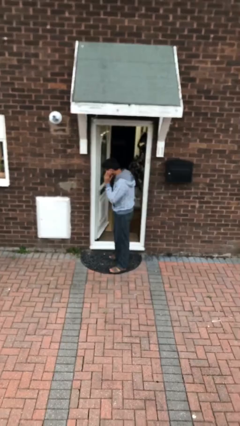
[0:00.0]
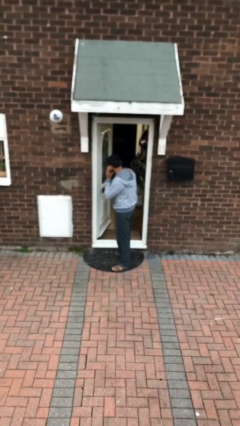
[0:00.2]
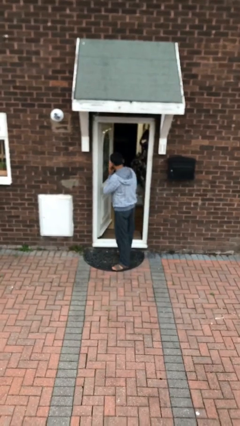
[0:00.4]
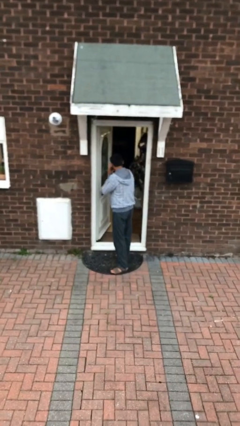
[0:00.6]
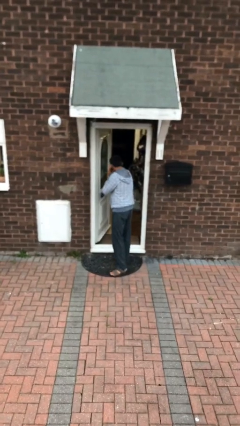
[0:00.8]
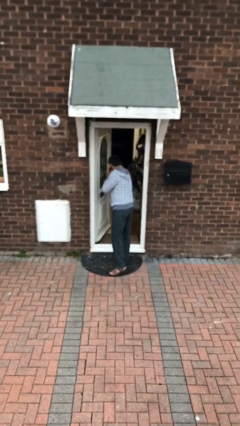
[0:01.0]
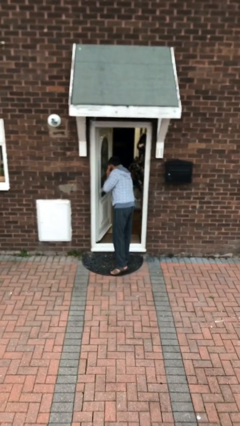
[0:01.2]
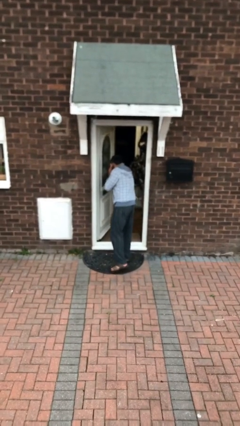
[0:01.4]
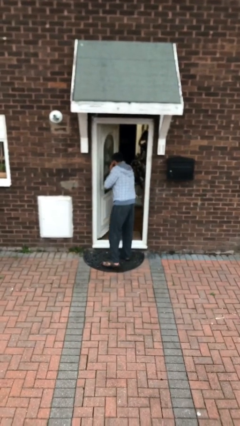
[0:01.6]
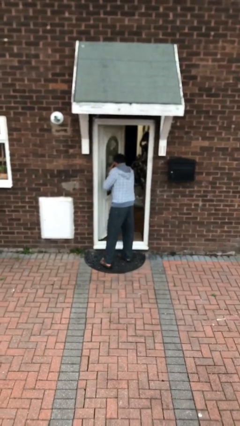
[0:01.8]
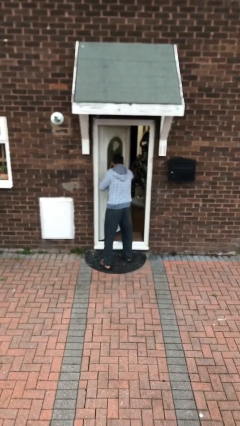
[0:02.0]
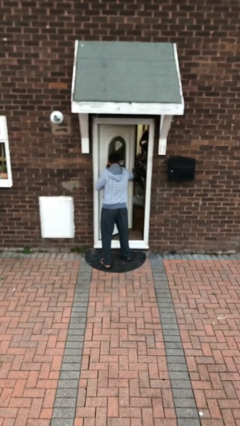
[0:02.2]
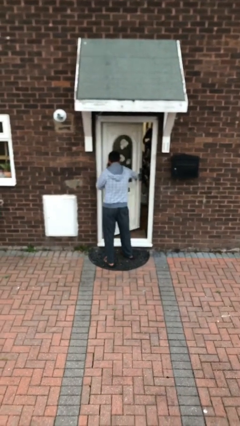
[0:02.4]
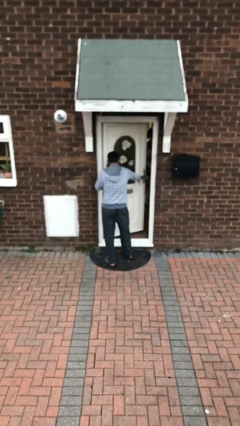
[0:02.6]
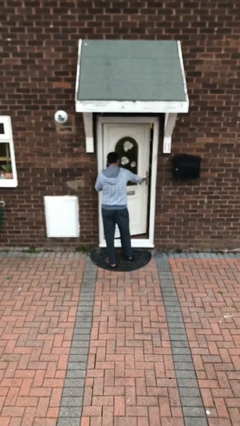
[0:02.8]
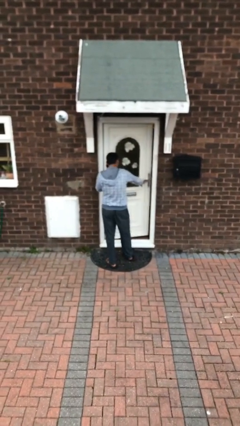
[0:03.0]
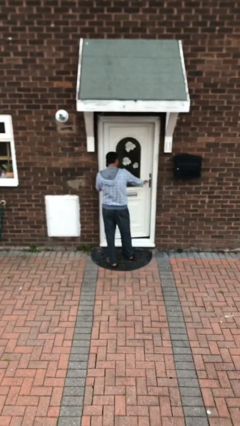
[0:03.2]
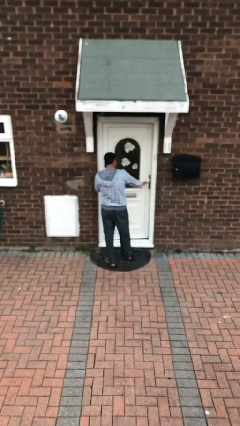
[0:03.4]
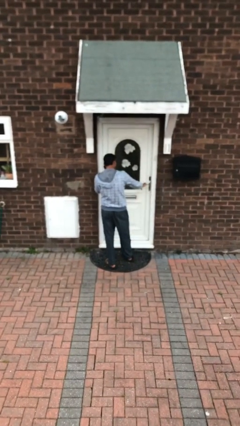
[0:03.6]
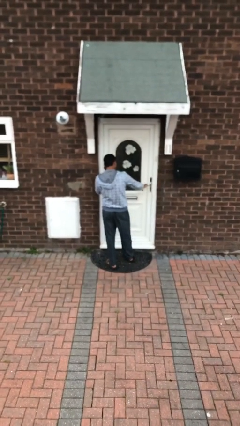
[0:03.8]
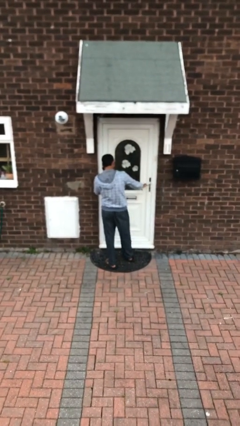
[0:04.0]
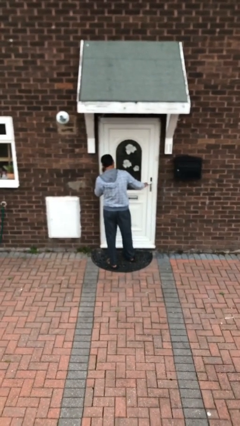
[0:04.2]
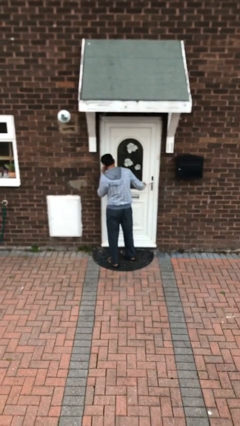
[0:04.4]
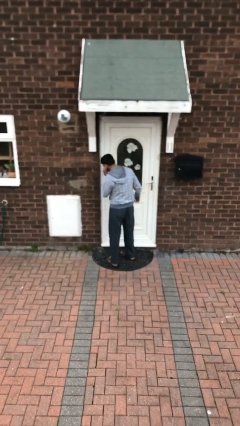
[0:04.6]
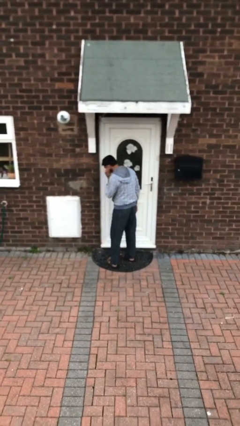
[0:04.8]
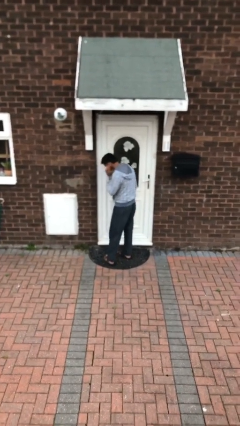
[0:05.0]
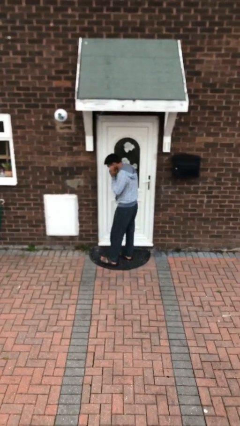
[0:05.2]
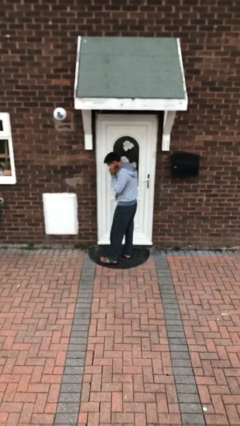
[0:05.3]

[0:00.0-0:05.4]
person closes facility door

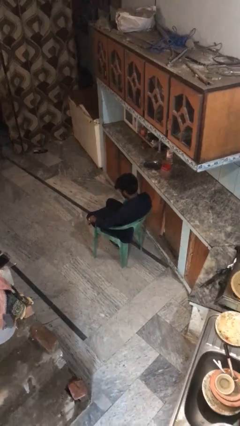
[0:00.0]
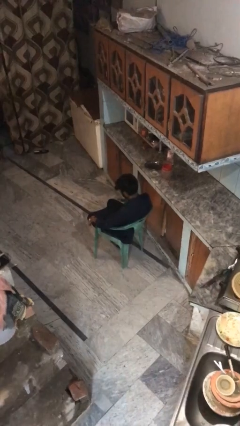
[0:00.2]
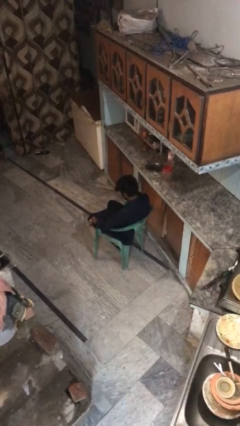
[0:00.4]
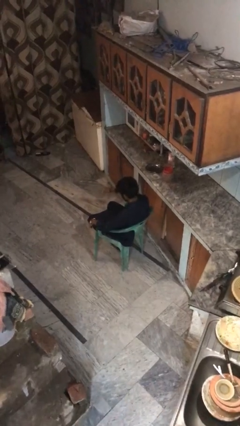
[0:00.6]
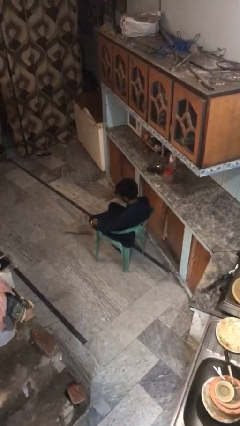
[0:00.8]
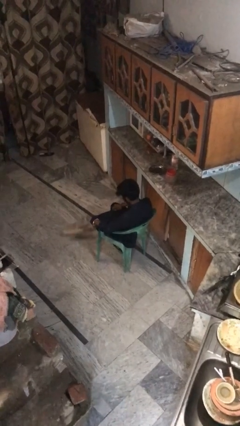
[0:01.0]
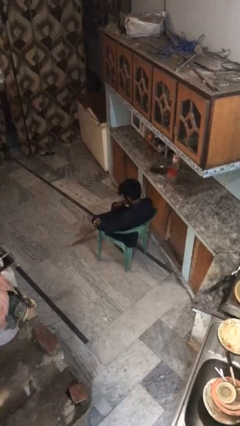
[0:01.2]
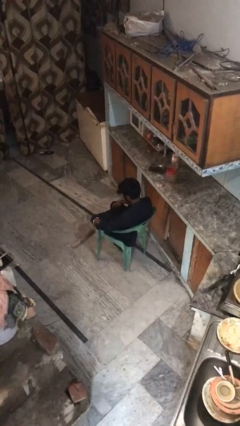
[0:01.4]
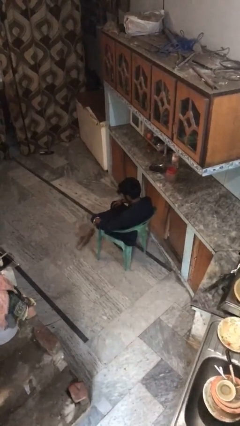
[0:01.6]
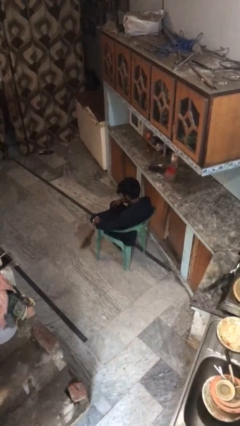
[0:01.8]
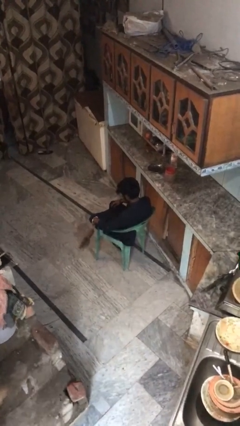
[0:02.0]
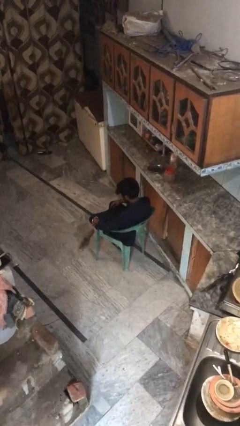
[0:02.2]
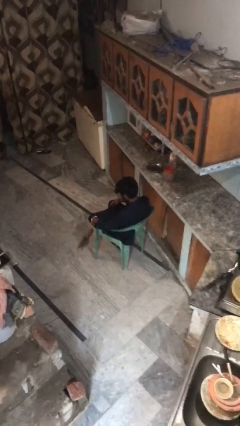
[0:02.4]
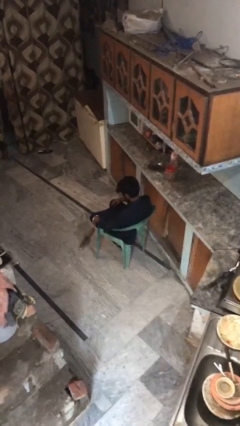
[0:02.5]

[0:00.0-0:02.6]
person throws object to ground

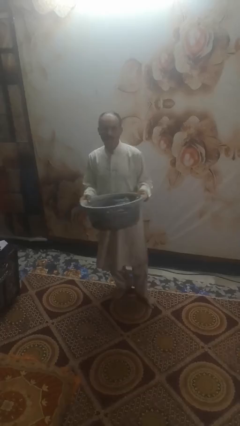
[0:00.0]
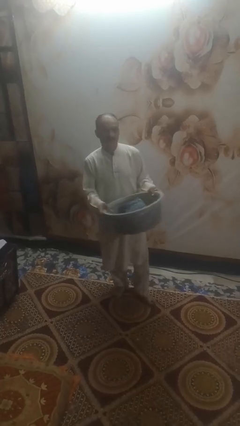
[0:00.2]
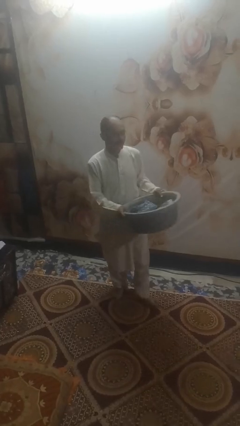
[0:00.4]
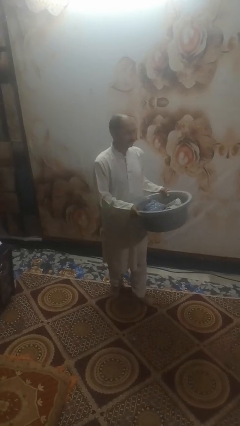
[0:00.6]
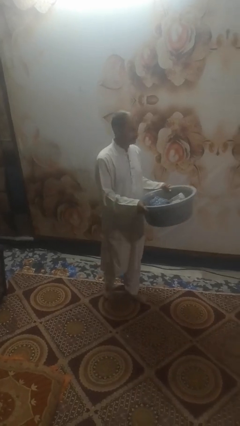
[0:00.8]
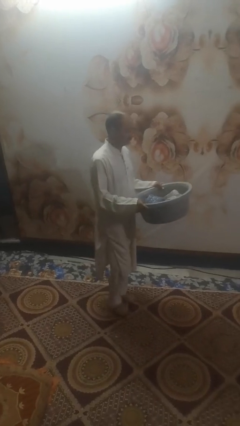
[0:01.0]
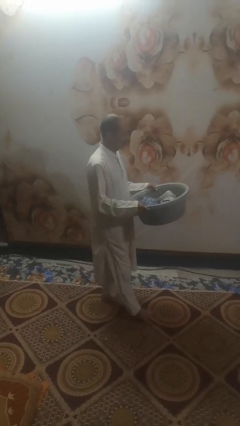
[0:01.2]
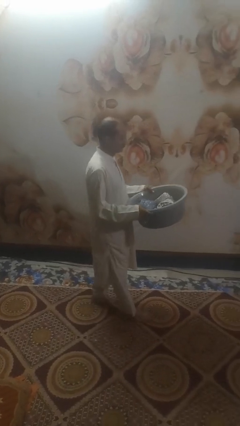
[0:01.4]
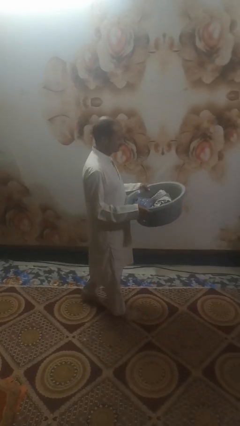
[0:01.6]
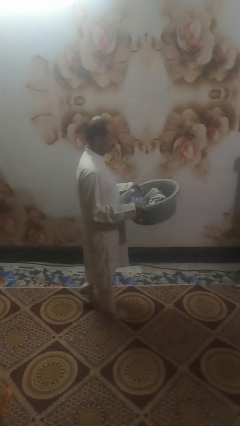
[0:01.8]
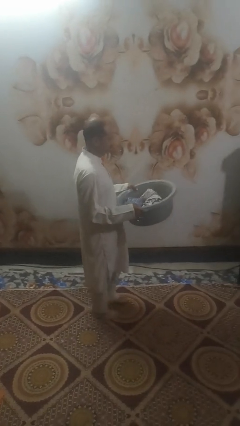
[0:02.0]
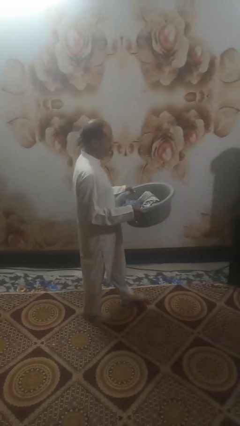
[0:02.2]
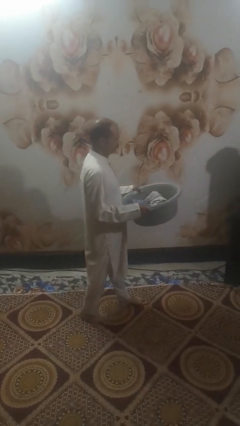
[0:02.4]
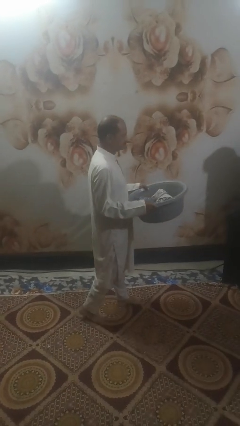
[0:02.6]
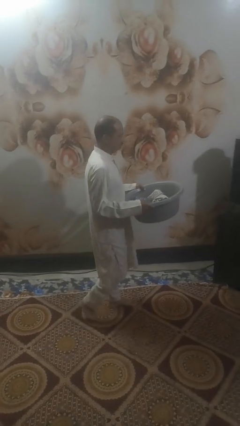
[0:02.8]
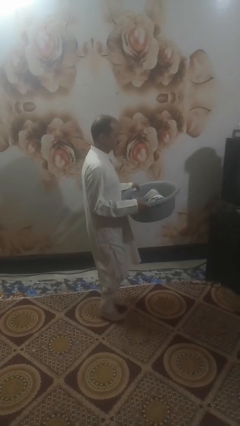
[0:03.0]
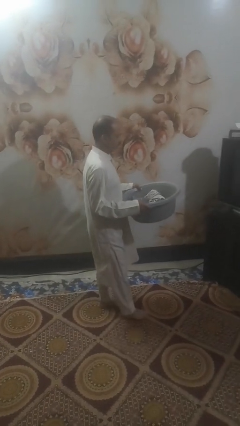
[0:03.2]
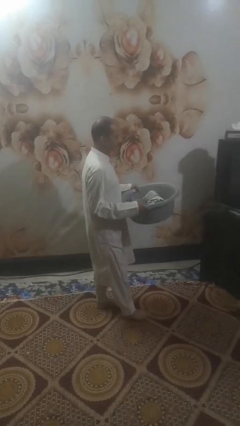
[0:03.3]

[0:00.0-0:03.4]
person carries laundry basket

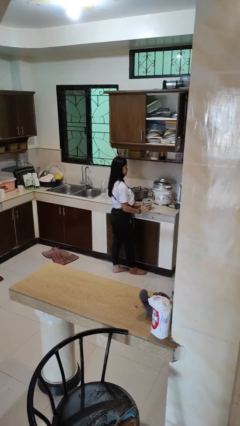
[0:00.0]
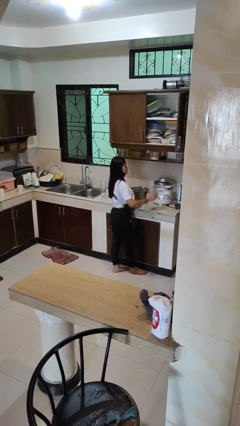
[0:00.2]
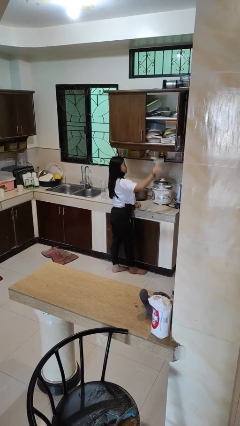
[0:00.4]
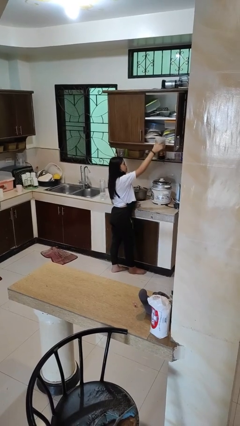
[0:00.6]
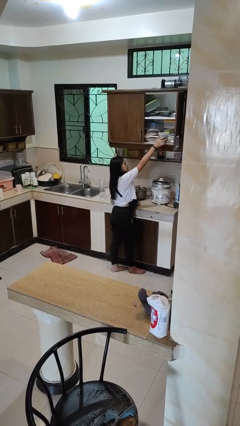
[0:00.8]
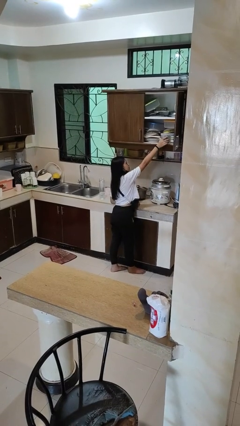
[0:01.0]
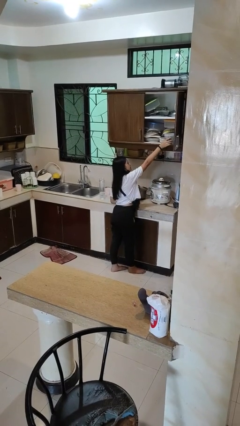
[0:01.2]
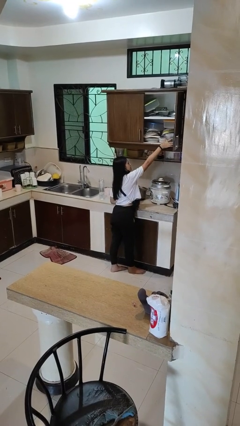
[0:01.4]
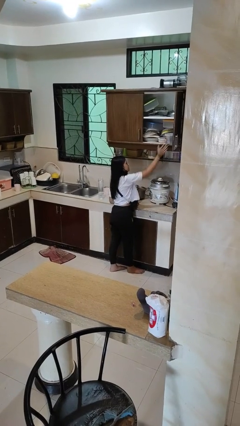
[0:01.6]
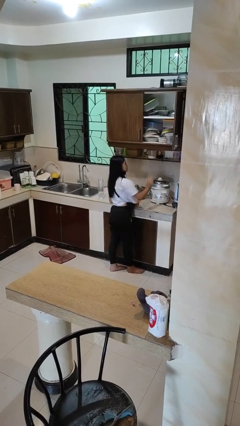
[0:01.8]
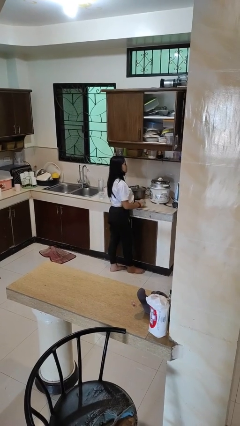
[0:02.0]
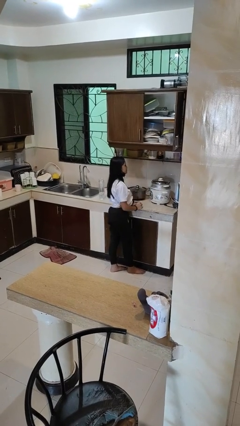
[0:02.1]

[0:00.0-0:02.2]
person puts down object on shelf

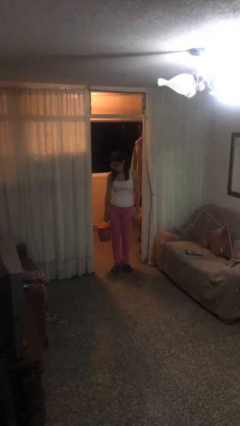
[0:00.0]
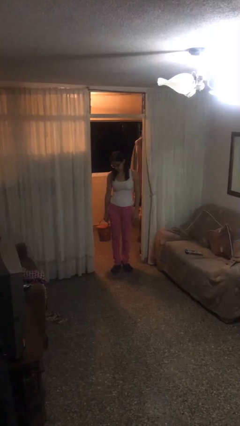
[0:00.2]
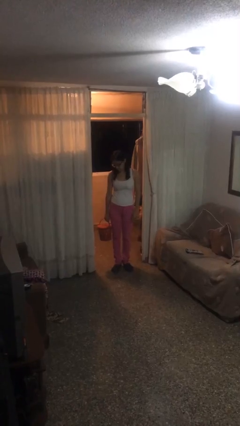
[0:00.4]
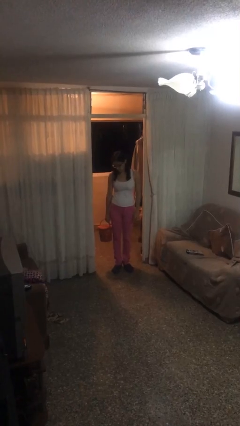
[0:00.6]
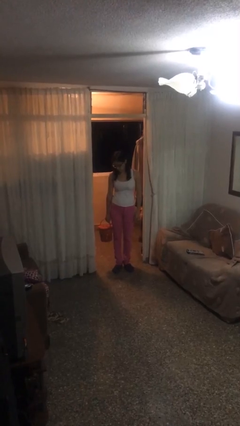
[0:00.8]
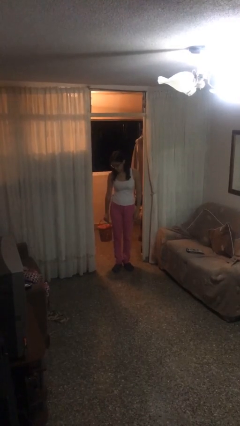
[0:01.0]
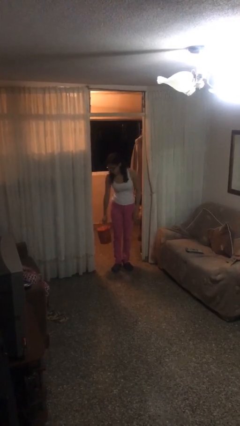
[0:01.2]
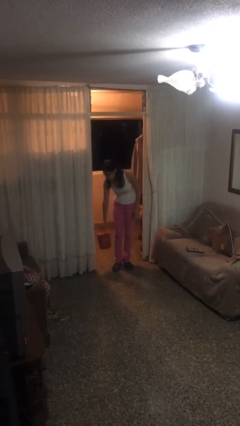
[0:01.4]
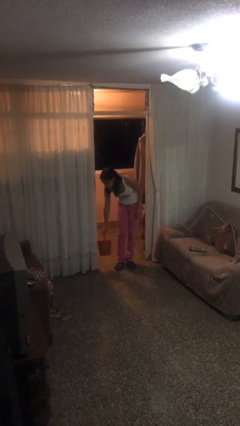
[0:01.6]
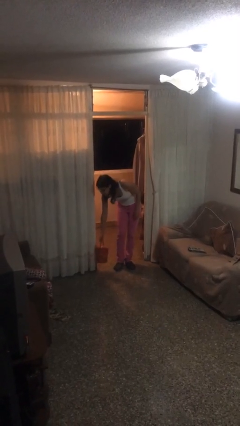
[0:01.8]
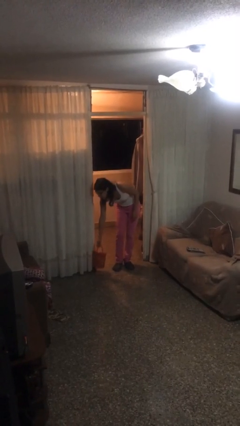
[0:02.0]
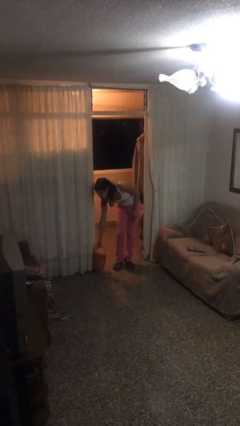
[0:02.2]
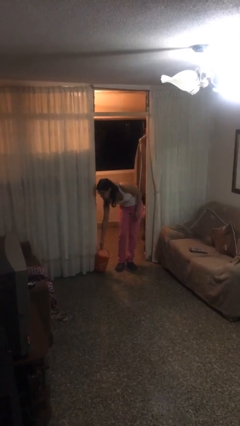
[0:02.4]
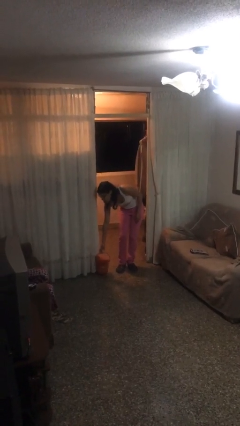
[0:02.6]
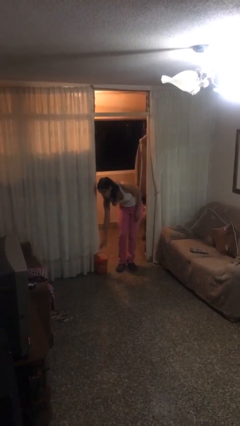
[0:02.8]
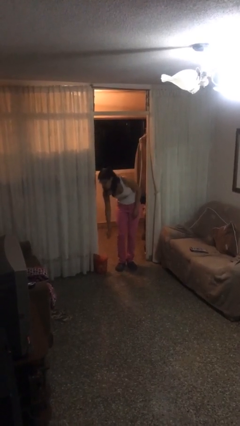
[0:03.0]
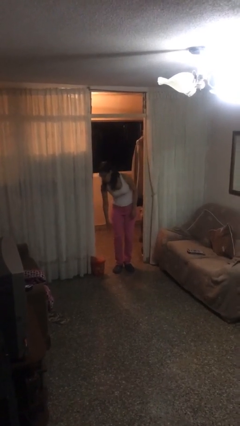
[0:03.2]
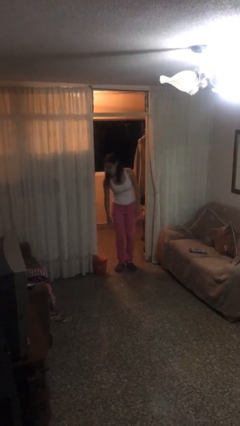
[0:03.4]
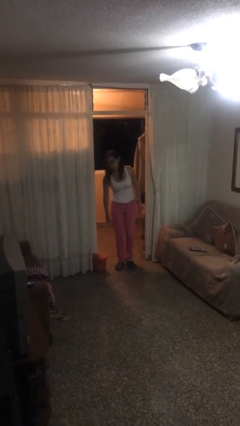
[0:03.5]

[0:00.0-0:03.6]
person puts down object on floor

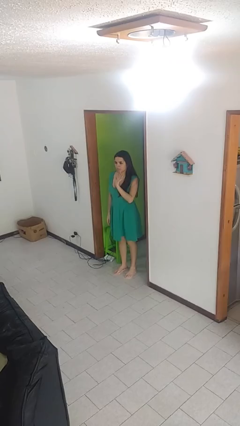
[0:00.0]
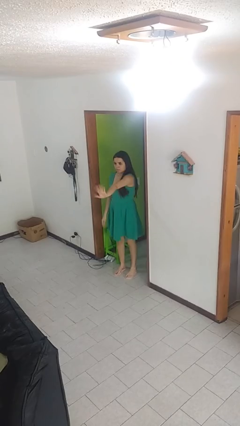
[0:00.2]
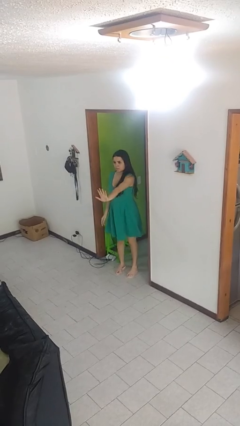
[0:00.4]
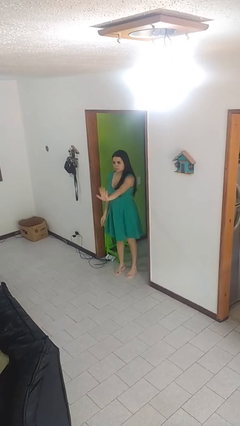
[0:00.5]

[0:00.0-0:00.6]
person gestures stop
